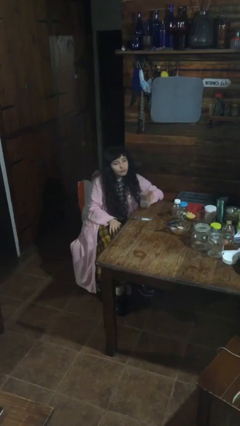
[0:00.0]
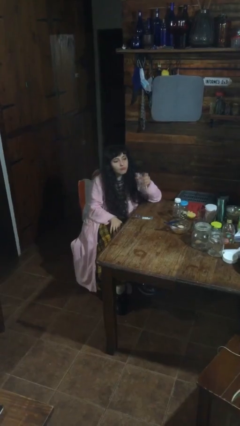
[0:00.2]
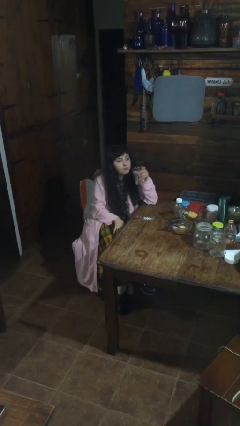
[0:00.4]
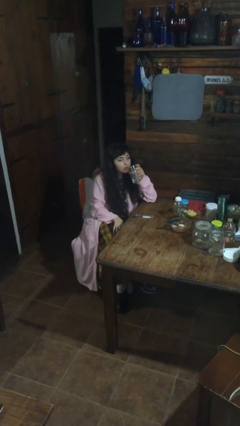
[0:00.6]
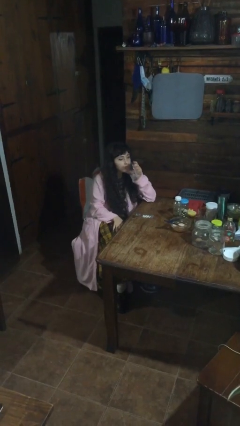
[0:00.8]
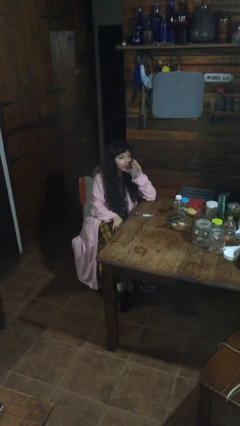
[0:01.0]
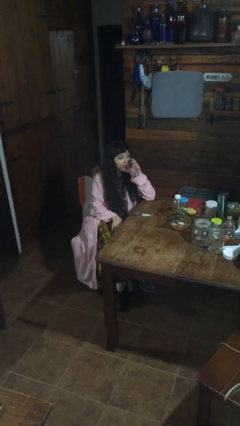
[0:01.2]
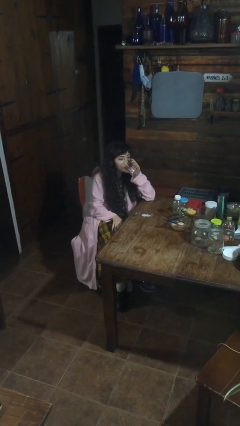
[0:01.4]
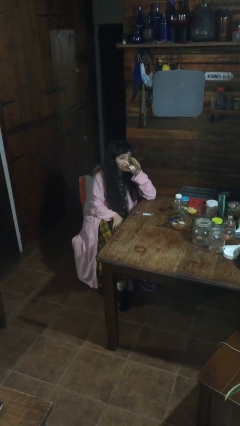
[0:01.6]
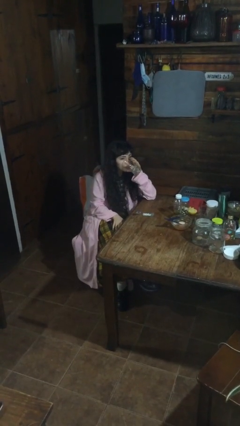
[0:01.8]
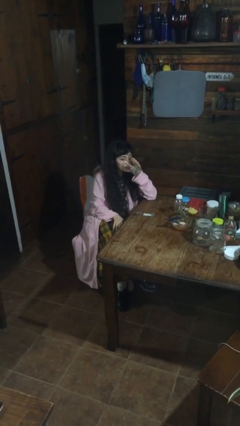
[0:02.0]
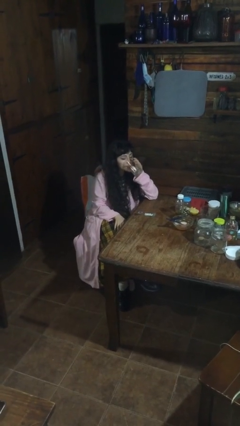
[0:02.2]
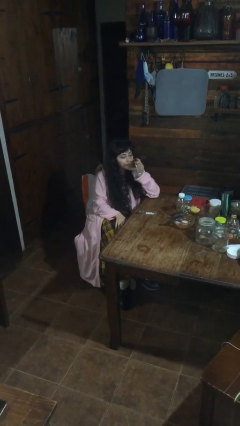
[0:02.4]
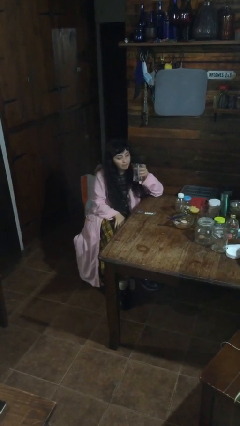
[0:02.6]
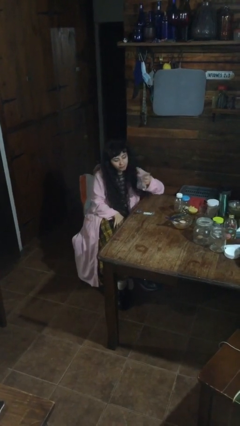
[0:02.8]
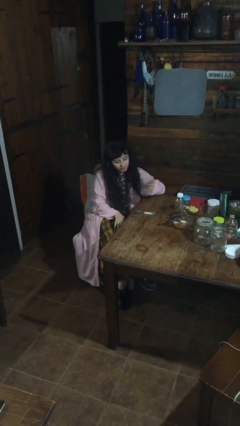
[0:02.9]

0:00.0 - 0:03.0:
person drinks from cup

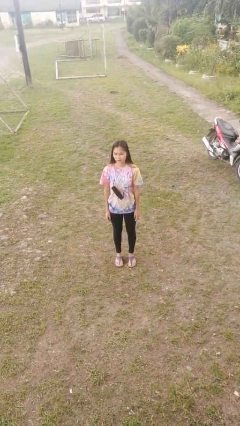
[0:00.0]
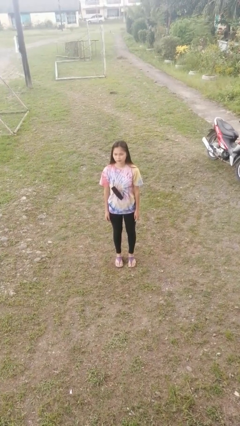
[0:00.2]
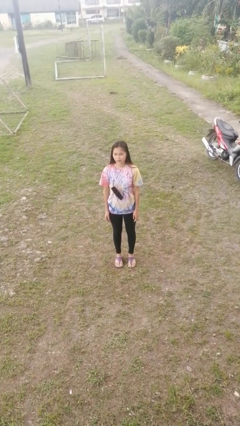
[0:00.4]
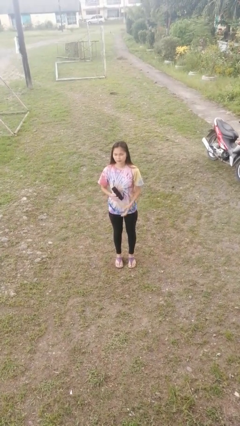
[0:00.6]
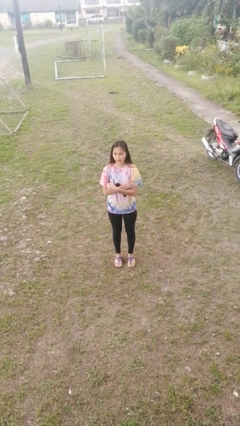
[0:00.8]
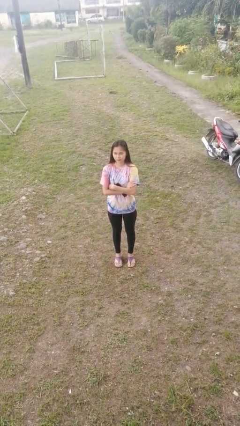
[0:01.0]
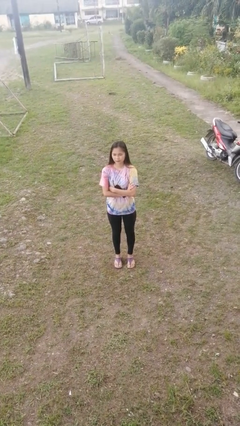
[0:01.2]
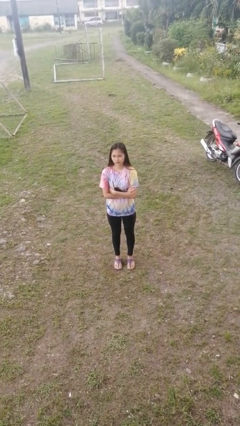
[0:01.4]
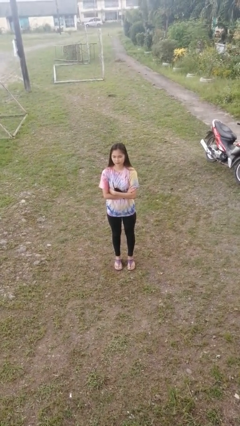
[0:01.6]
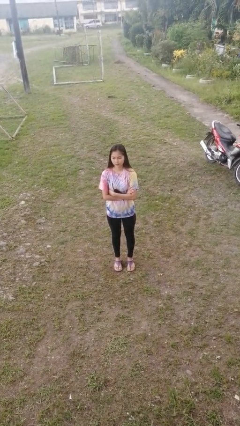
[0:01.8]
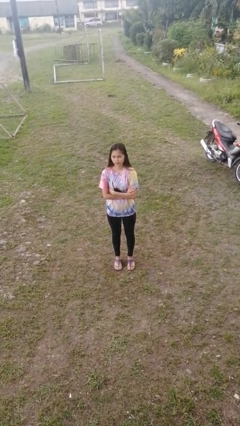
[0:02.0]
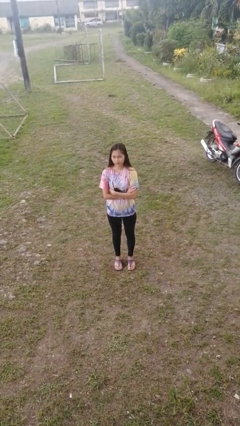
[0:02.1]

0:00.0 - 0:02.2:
person crosses arms

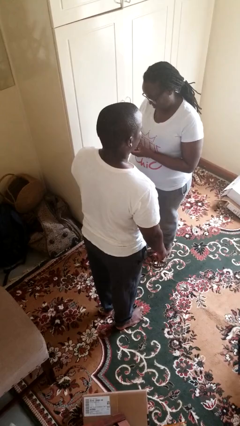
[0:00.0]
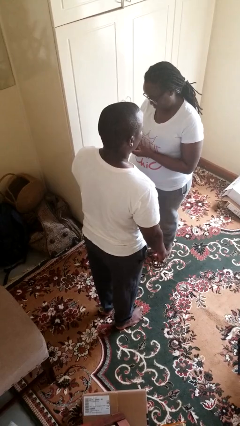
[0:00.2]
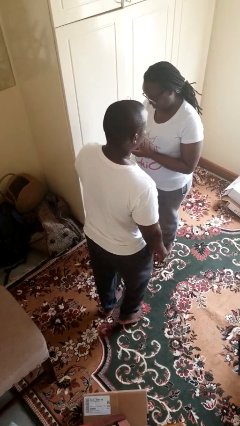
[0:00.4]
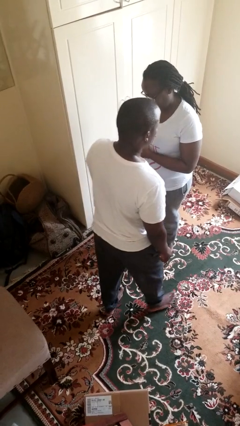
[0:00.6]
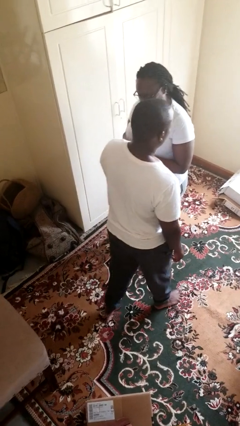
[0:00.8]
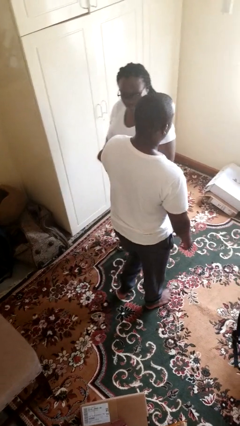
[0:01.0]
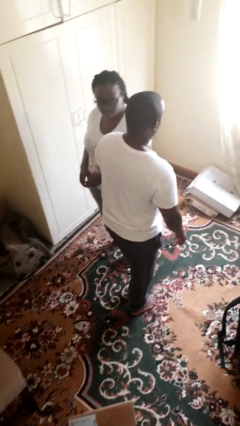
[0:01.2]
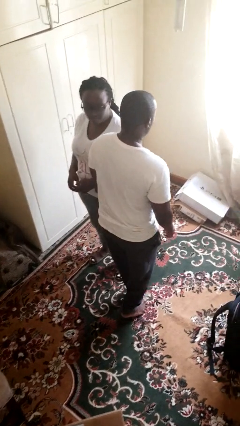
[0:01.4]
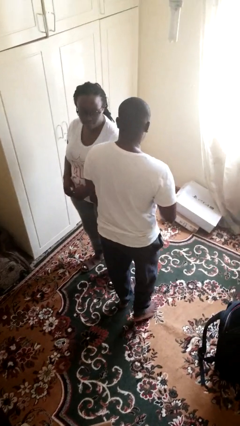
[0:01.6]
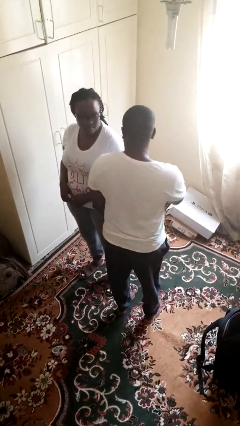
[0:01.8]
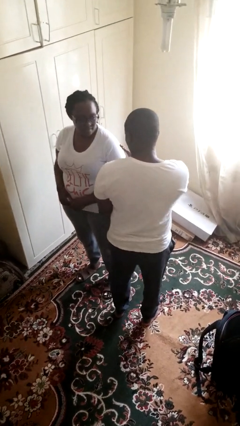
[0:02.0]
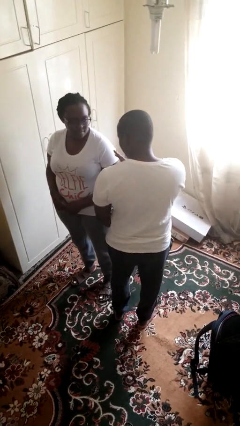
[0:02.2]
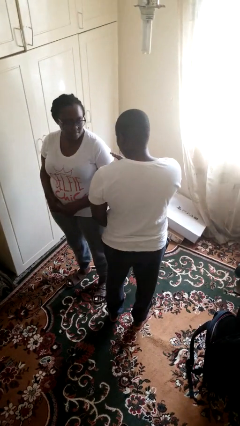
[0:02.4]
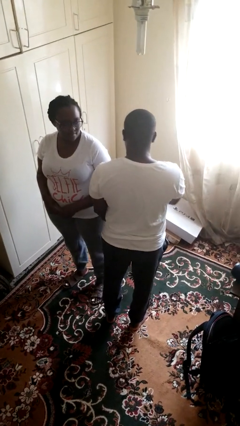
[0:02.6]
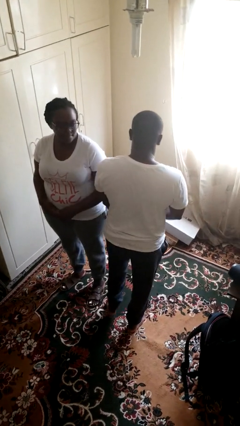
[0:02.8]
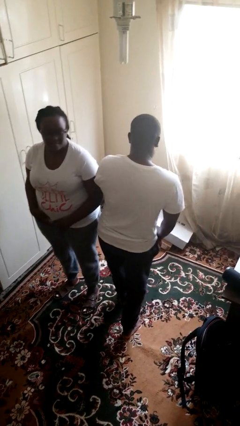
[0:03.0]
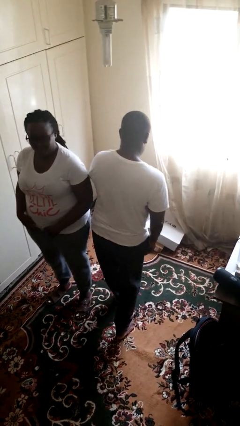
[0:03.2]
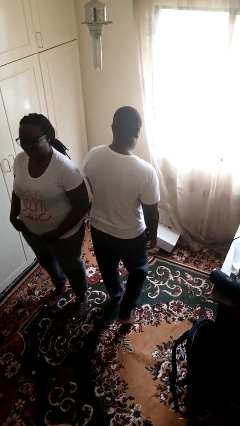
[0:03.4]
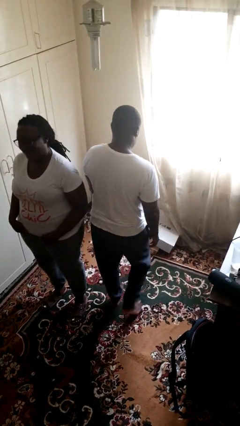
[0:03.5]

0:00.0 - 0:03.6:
person bumps into person

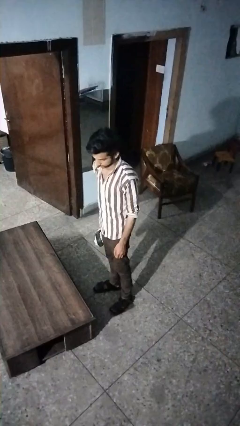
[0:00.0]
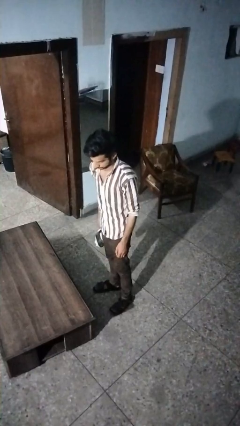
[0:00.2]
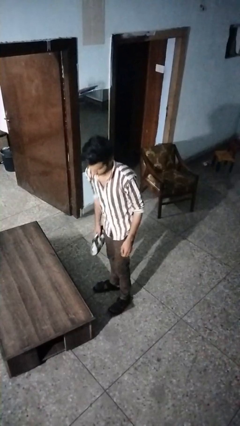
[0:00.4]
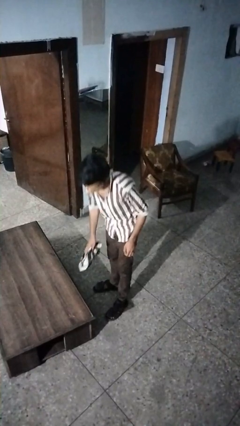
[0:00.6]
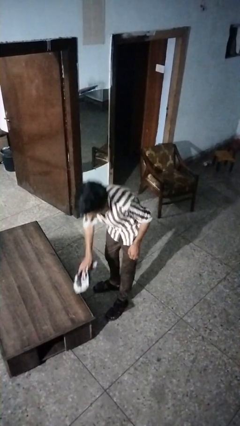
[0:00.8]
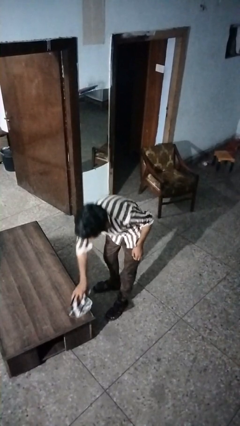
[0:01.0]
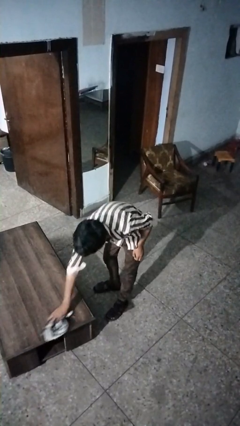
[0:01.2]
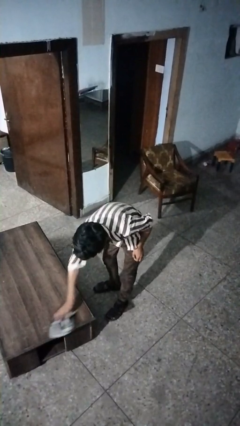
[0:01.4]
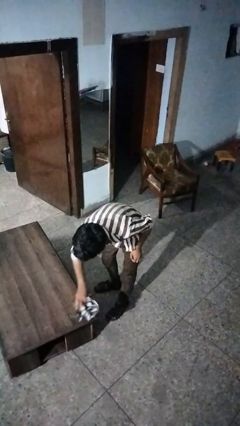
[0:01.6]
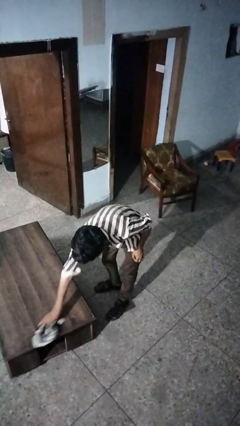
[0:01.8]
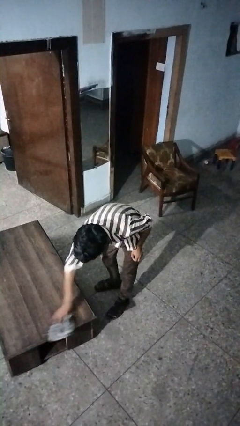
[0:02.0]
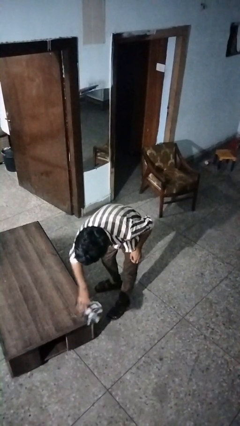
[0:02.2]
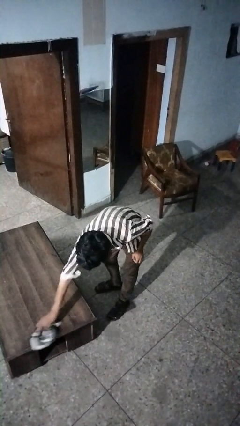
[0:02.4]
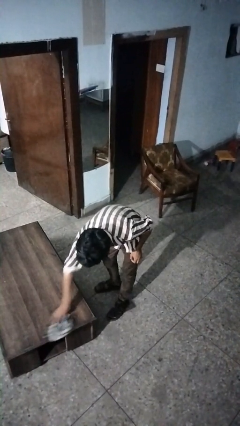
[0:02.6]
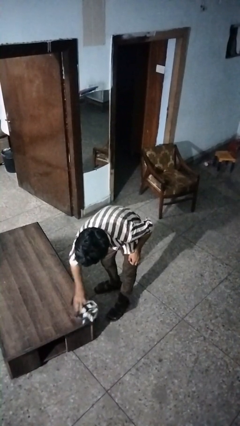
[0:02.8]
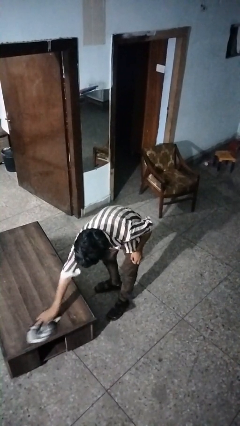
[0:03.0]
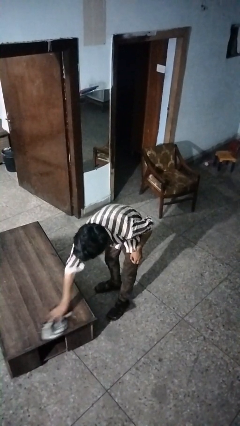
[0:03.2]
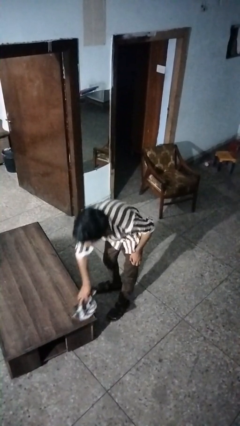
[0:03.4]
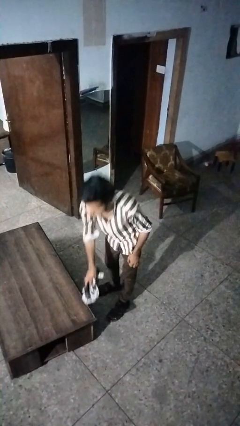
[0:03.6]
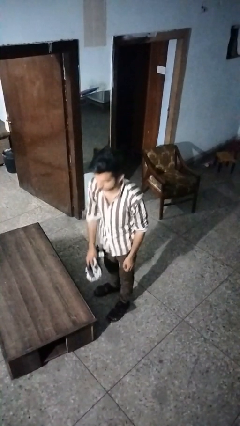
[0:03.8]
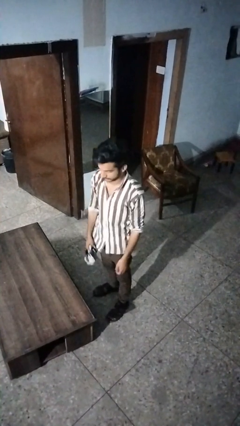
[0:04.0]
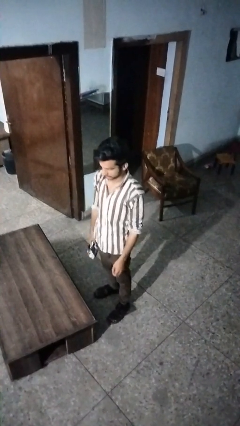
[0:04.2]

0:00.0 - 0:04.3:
person cleans table with rag

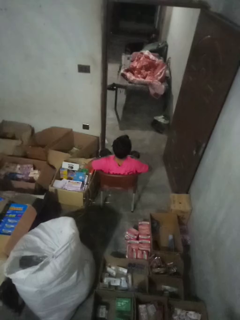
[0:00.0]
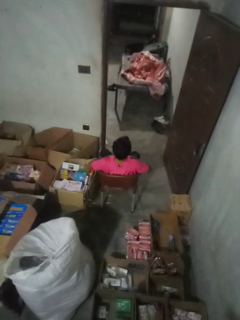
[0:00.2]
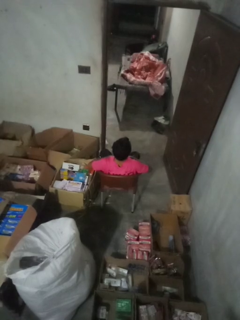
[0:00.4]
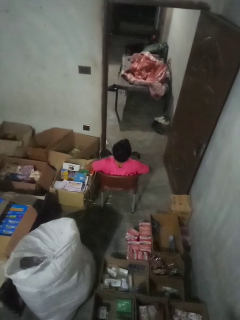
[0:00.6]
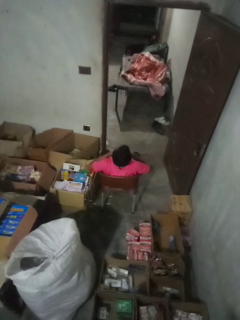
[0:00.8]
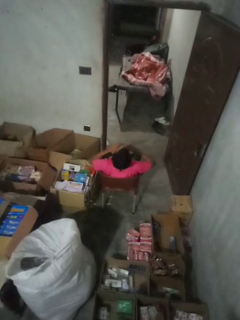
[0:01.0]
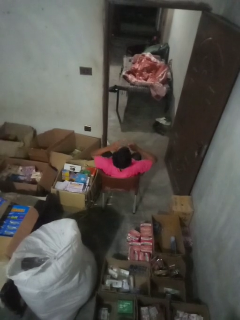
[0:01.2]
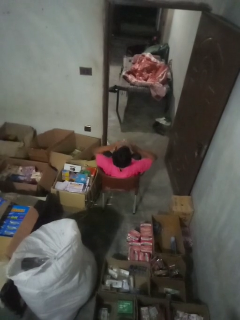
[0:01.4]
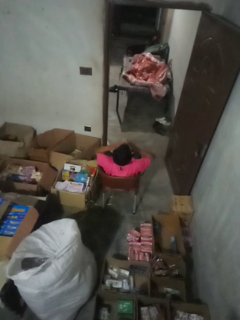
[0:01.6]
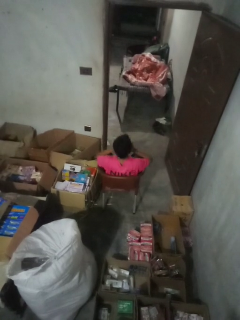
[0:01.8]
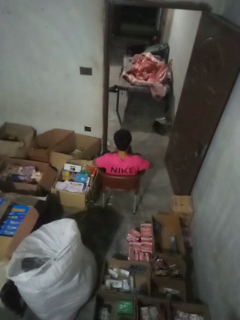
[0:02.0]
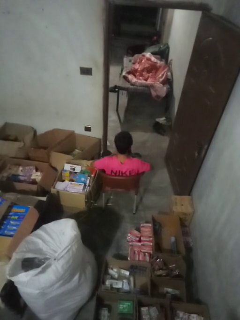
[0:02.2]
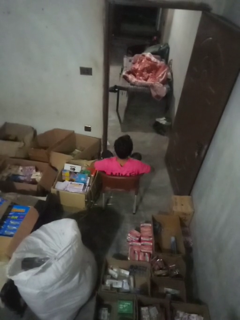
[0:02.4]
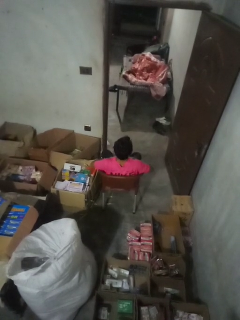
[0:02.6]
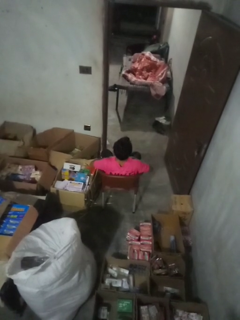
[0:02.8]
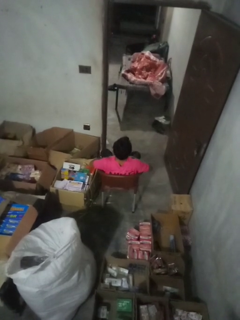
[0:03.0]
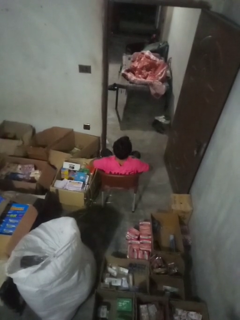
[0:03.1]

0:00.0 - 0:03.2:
person sneezes into hand

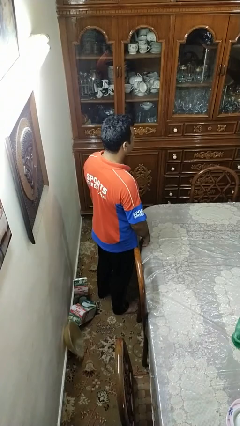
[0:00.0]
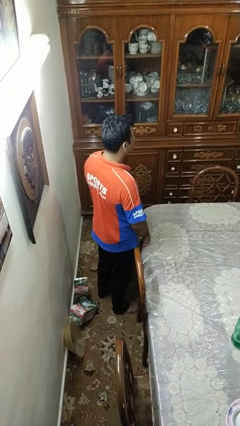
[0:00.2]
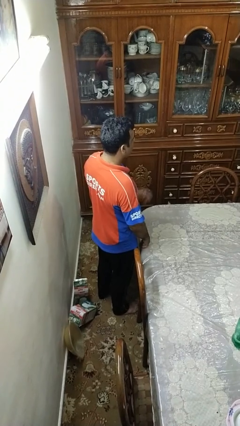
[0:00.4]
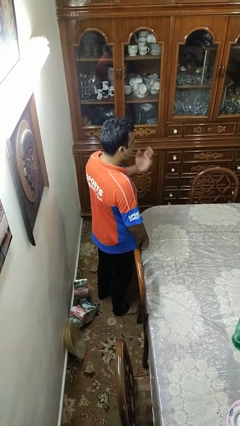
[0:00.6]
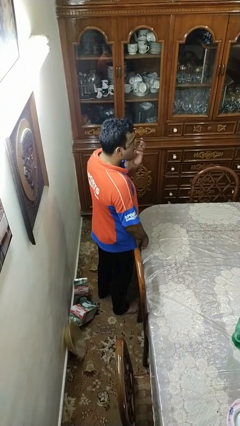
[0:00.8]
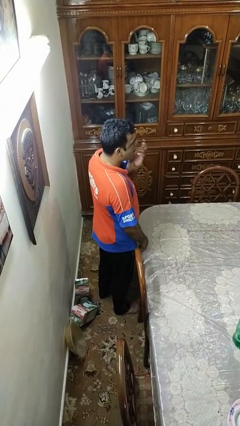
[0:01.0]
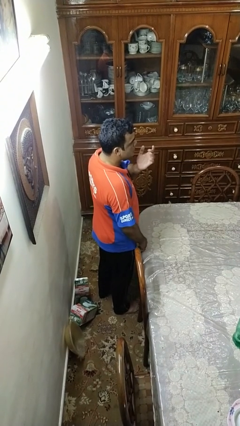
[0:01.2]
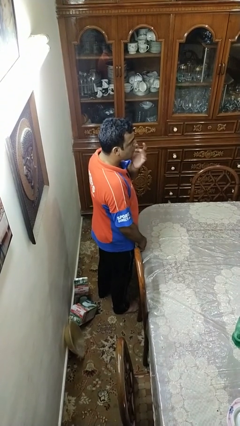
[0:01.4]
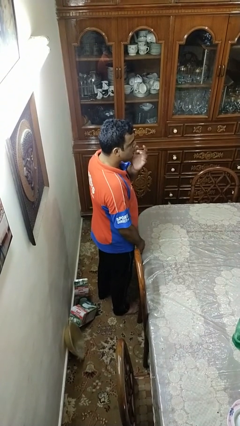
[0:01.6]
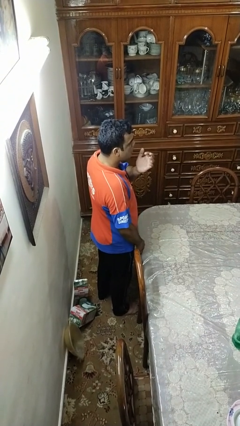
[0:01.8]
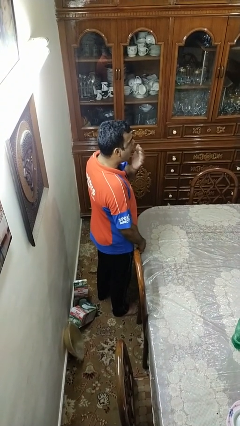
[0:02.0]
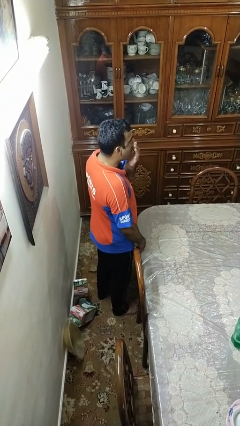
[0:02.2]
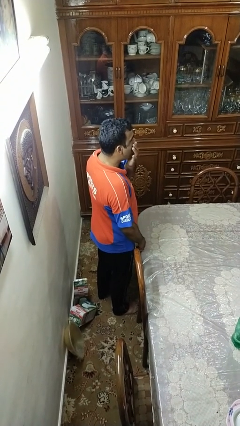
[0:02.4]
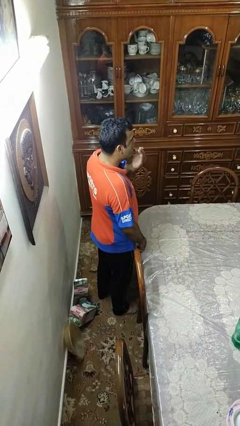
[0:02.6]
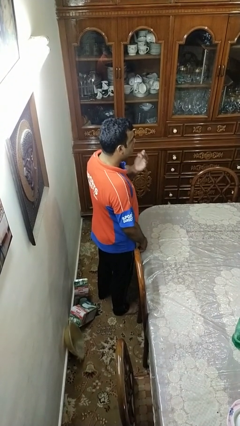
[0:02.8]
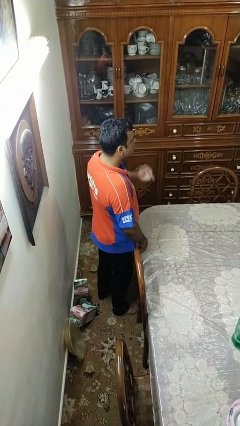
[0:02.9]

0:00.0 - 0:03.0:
person licks fingers
